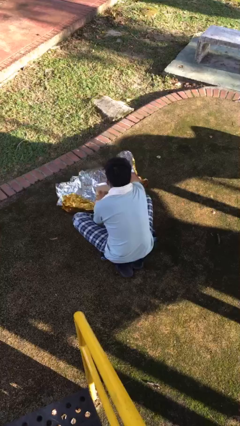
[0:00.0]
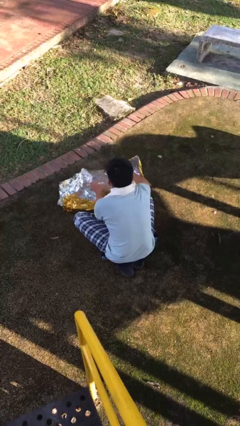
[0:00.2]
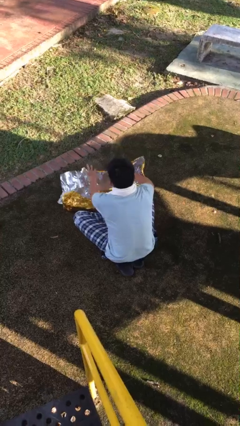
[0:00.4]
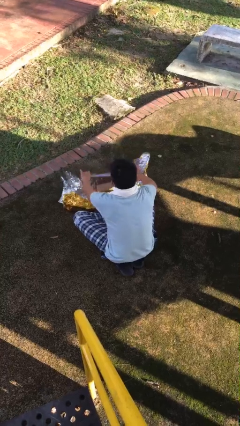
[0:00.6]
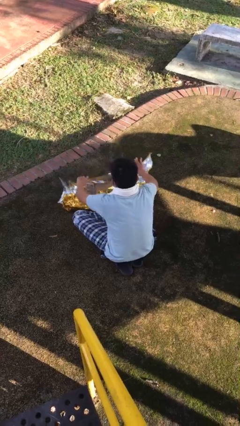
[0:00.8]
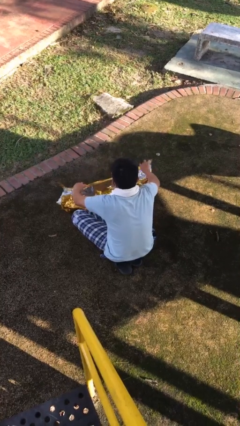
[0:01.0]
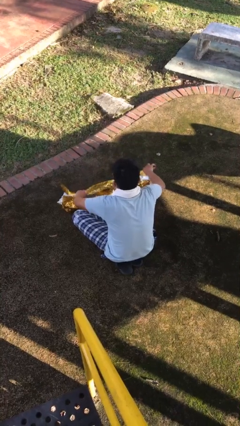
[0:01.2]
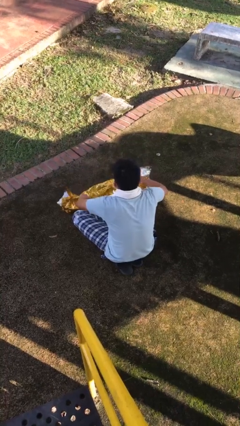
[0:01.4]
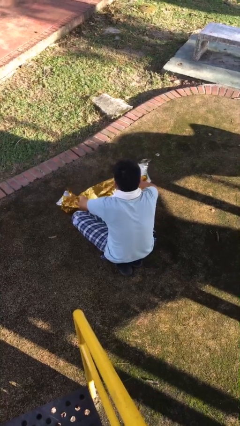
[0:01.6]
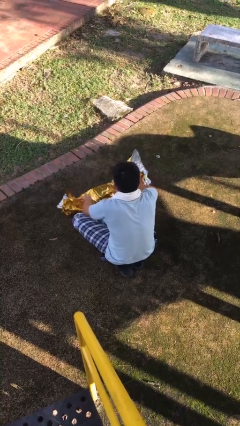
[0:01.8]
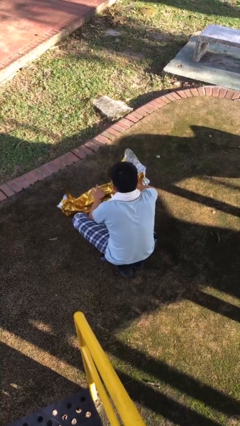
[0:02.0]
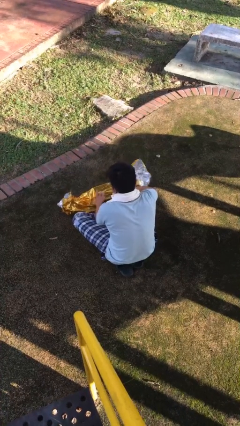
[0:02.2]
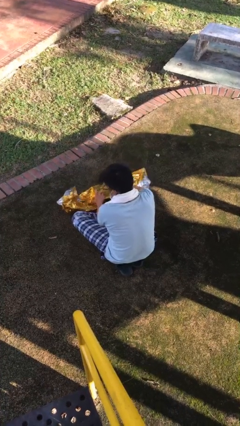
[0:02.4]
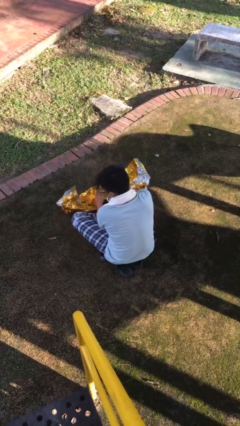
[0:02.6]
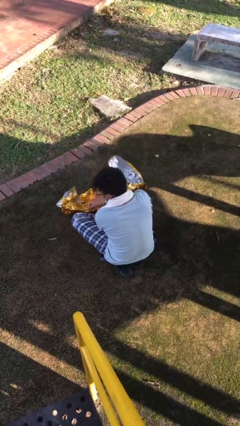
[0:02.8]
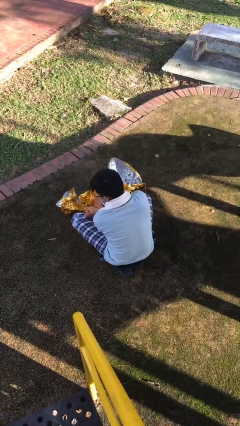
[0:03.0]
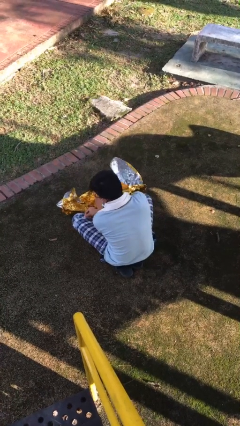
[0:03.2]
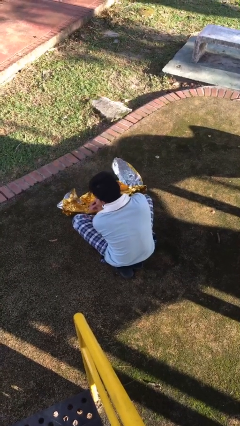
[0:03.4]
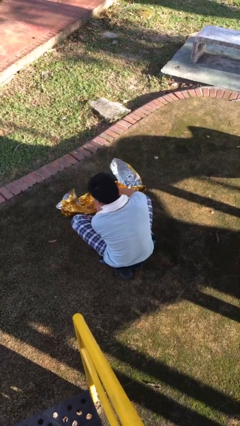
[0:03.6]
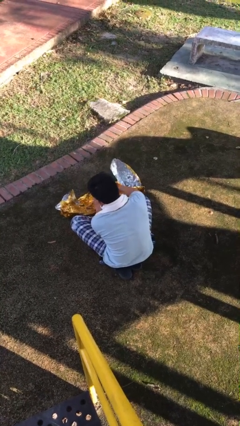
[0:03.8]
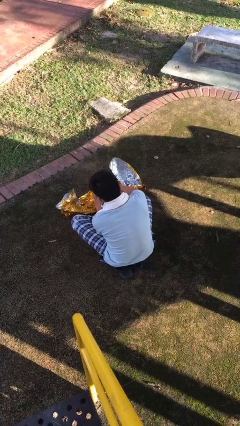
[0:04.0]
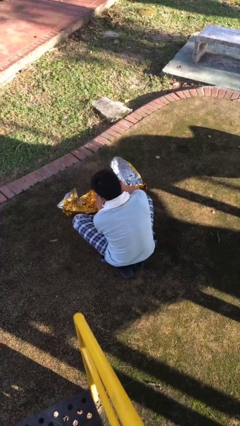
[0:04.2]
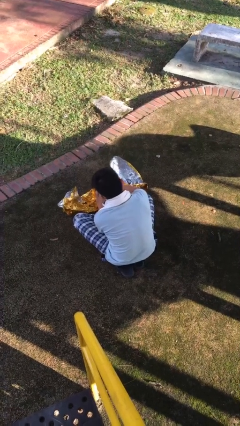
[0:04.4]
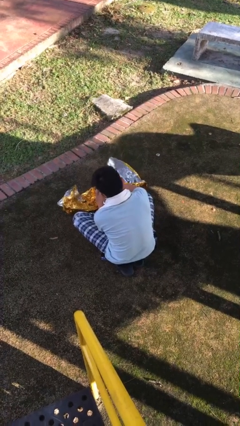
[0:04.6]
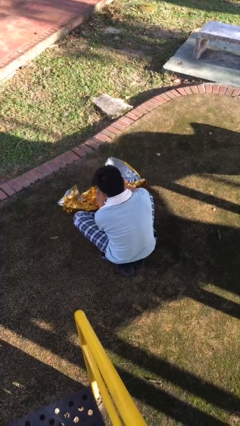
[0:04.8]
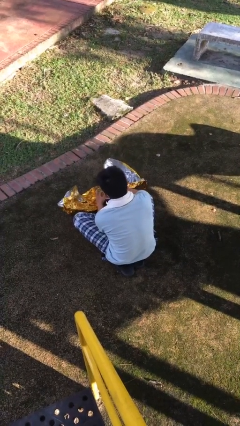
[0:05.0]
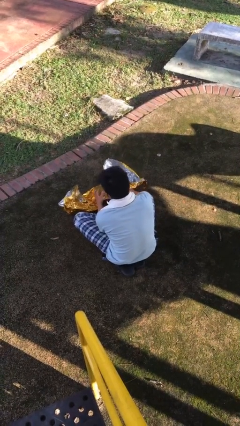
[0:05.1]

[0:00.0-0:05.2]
person wraps box

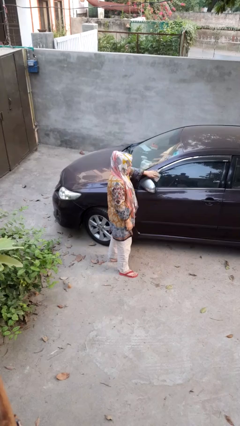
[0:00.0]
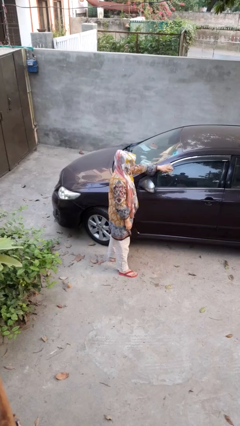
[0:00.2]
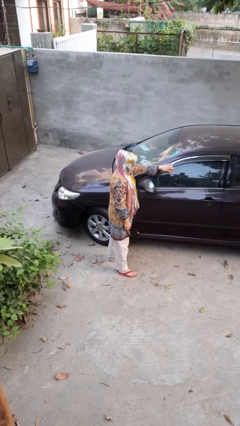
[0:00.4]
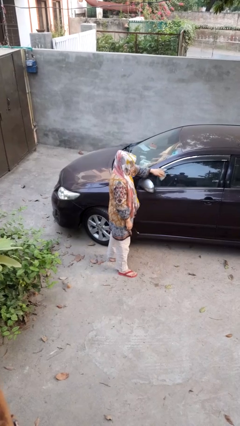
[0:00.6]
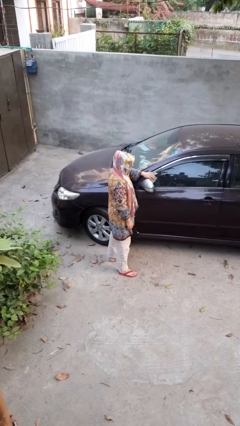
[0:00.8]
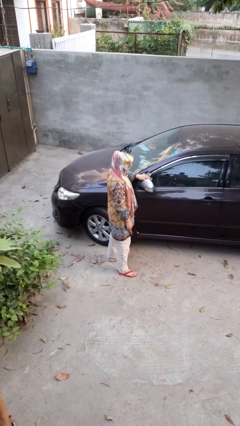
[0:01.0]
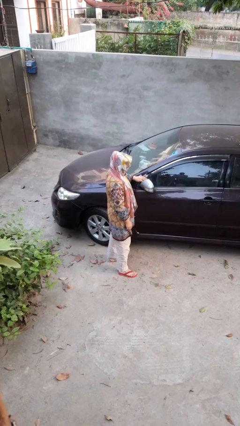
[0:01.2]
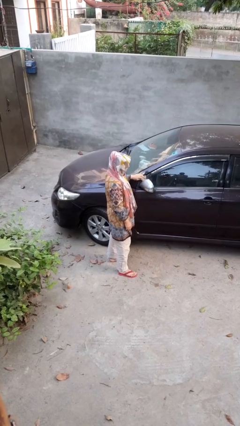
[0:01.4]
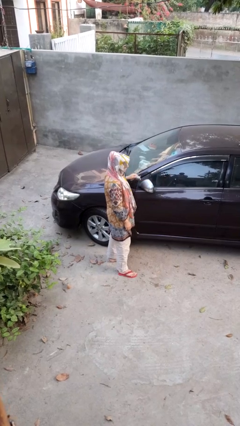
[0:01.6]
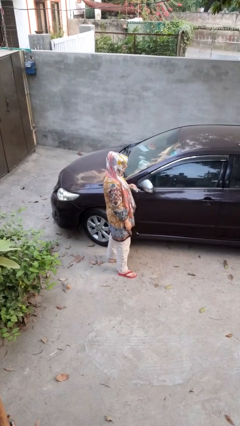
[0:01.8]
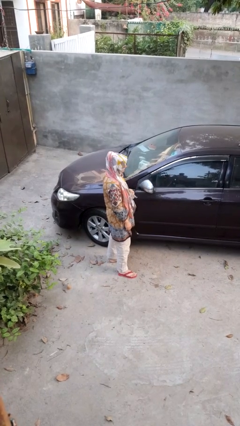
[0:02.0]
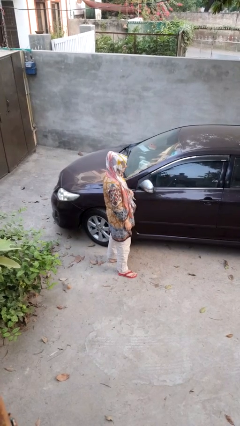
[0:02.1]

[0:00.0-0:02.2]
person polishes car with rag

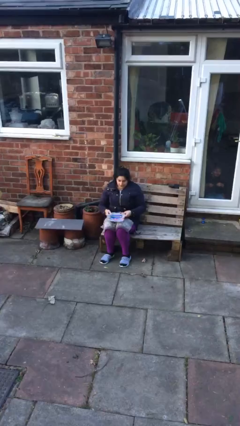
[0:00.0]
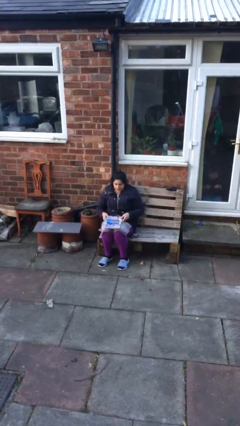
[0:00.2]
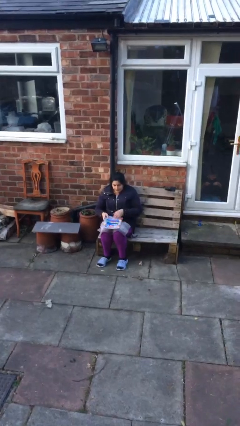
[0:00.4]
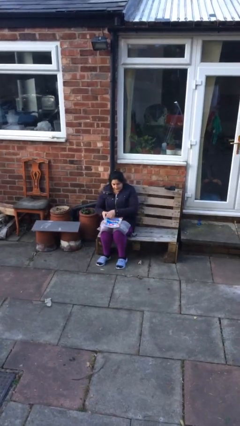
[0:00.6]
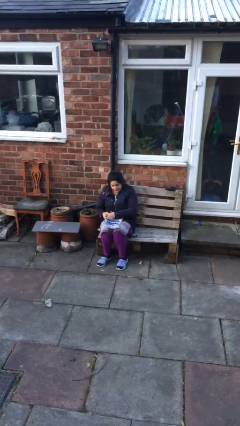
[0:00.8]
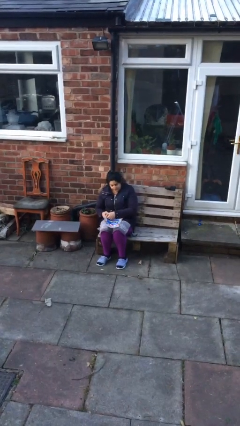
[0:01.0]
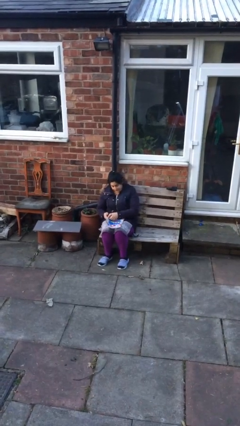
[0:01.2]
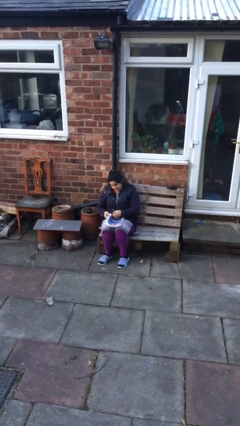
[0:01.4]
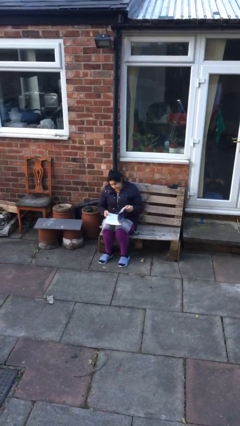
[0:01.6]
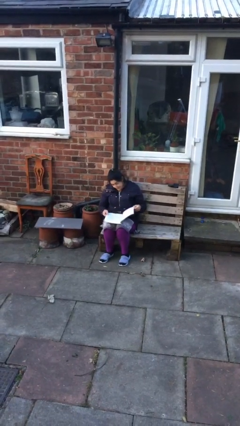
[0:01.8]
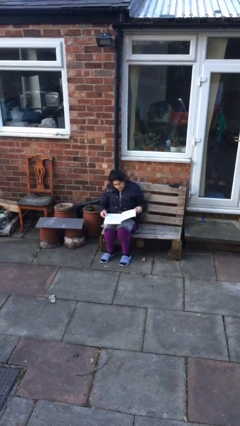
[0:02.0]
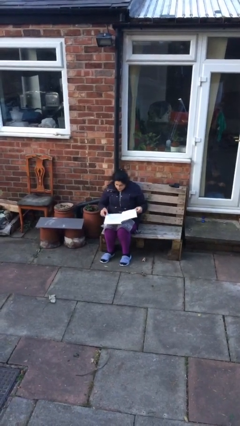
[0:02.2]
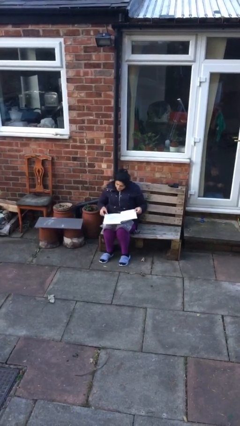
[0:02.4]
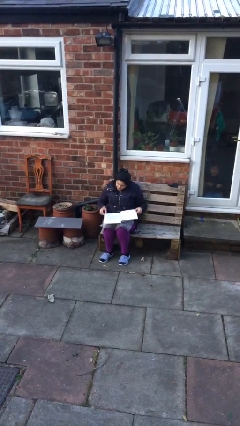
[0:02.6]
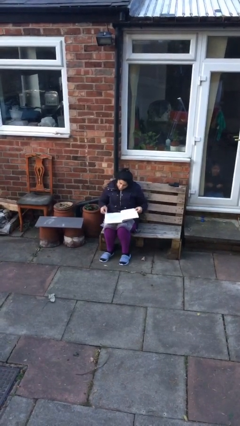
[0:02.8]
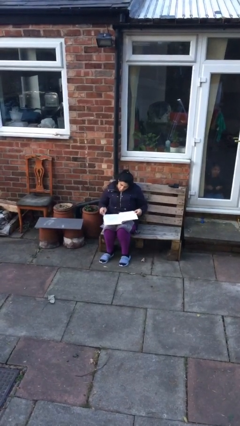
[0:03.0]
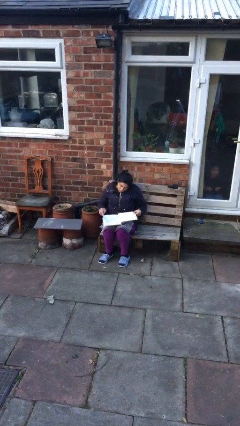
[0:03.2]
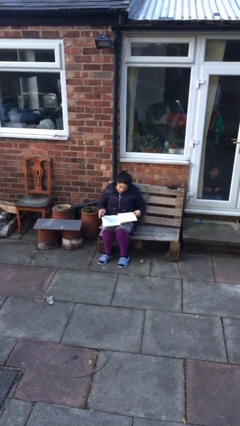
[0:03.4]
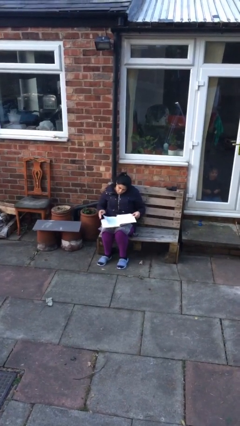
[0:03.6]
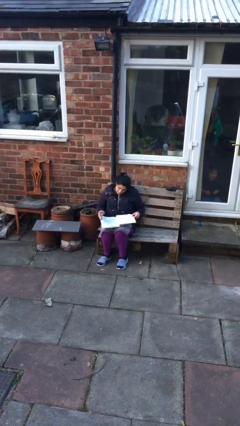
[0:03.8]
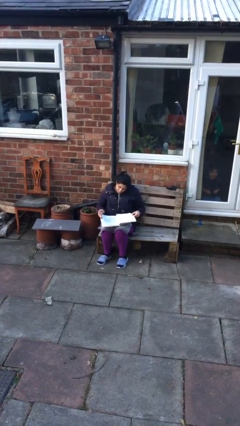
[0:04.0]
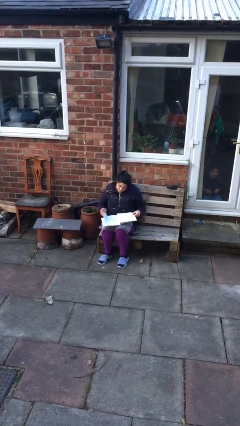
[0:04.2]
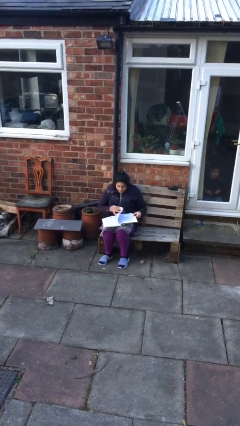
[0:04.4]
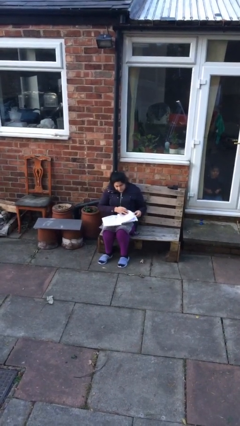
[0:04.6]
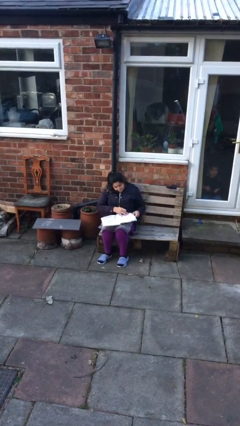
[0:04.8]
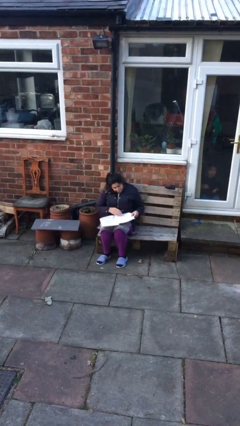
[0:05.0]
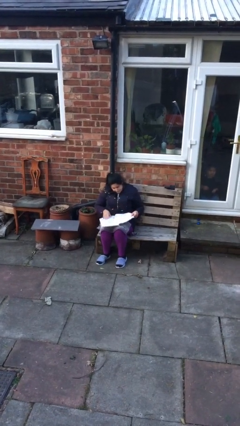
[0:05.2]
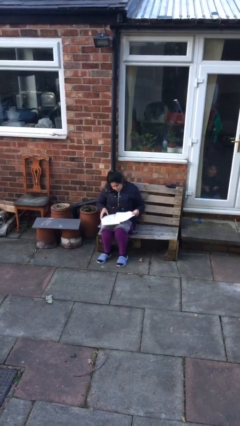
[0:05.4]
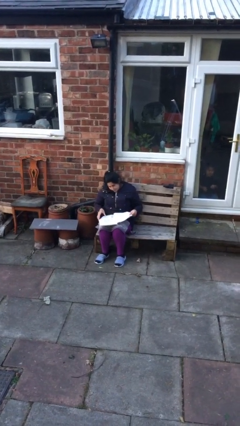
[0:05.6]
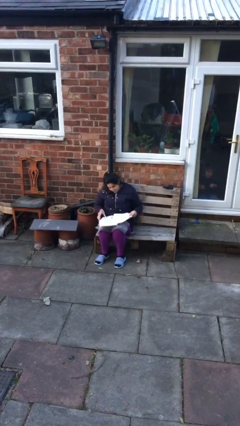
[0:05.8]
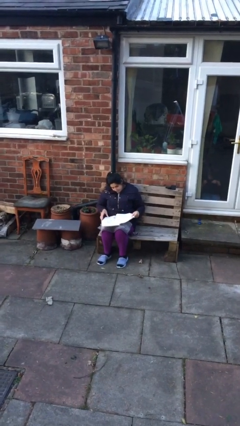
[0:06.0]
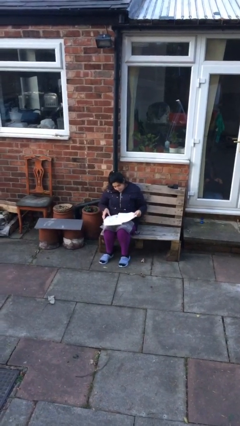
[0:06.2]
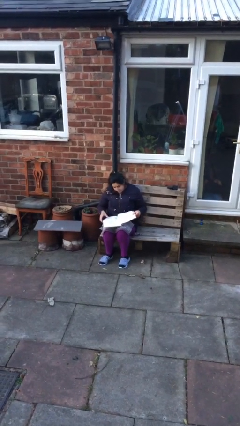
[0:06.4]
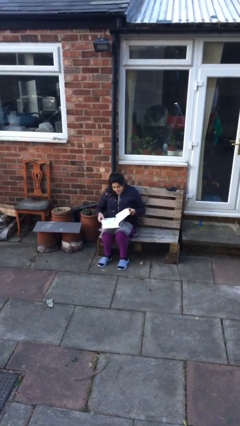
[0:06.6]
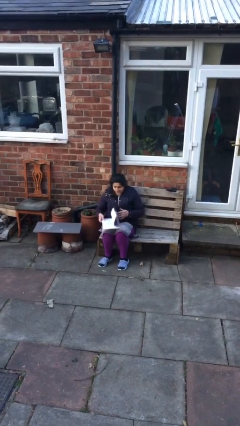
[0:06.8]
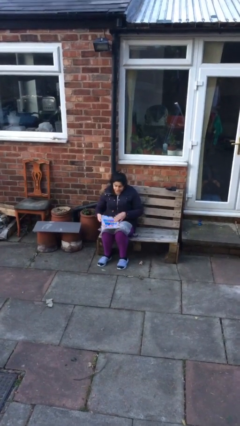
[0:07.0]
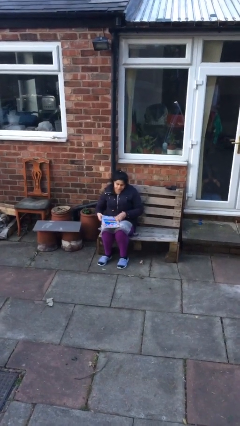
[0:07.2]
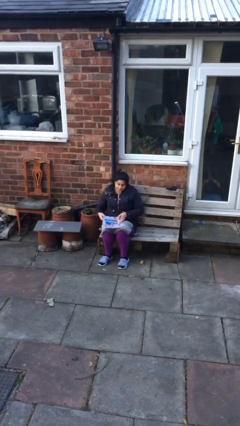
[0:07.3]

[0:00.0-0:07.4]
person reads document

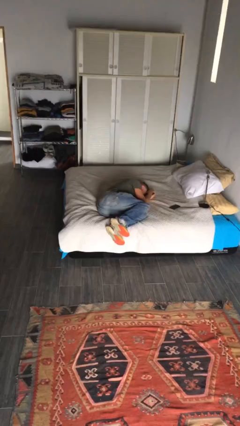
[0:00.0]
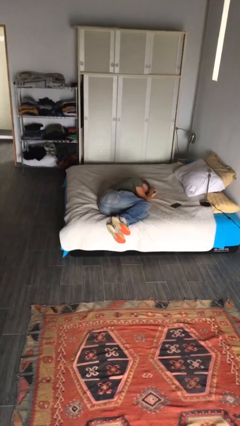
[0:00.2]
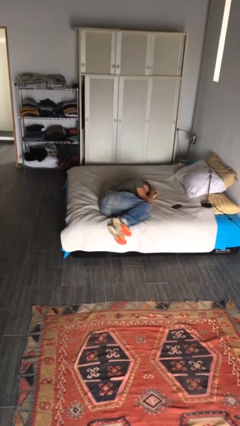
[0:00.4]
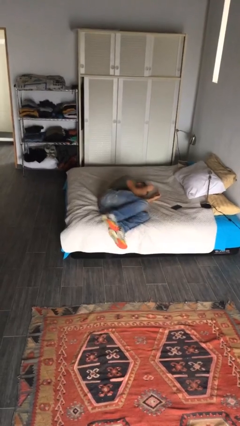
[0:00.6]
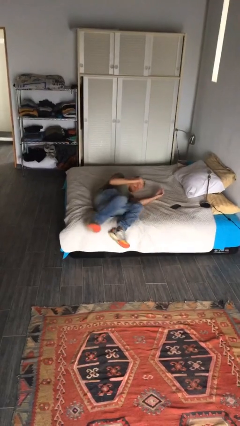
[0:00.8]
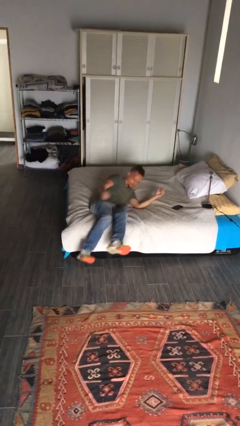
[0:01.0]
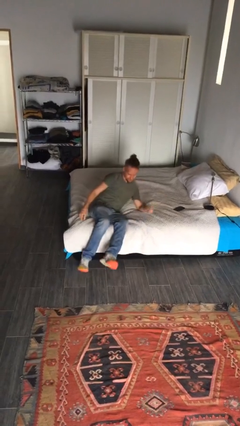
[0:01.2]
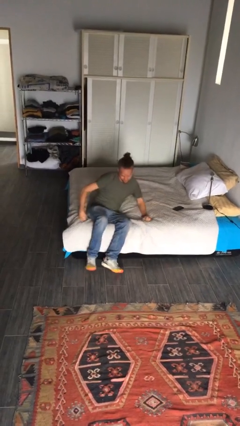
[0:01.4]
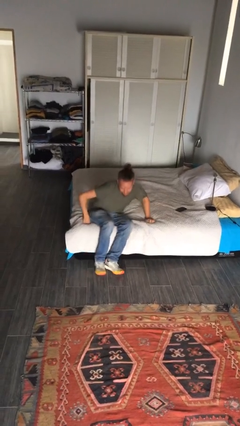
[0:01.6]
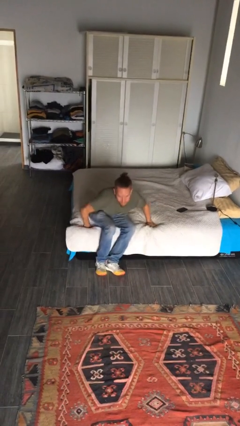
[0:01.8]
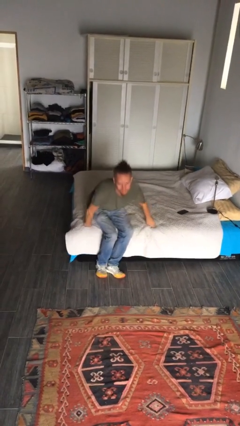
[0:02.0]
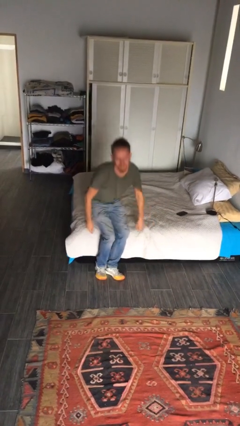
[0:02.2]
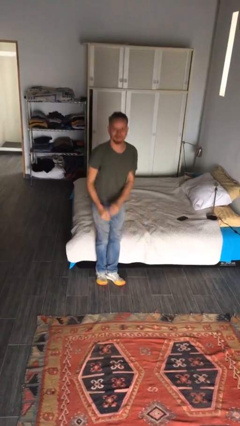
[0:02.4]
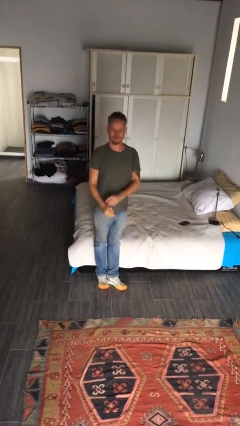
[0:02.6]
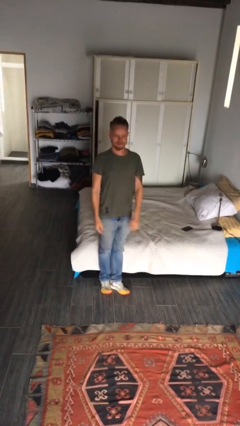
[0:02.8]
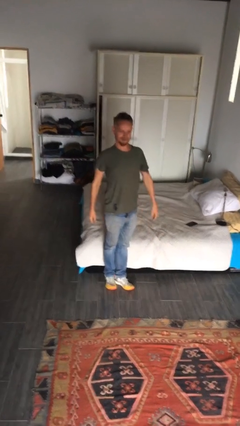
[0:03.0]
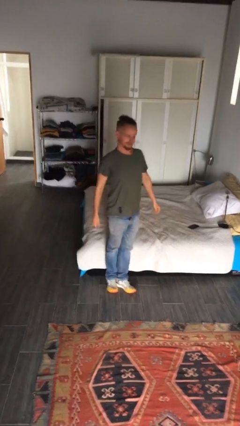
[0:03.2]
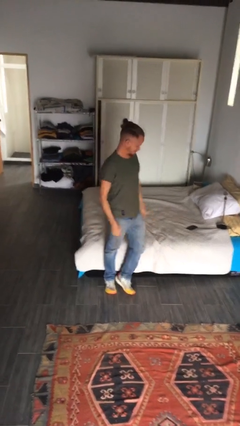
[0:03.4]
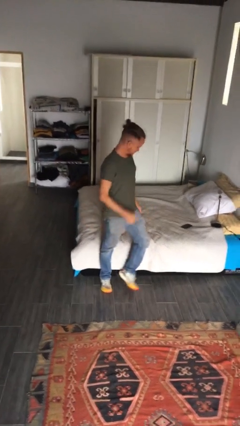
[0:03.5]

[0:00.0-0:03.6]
person stands up
